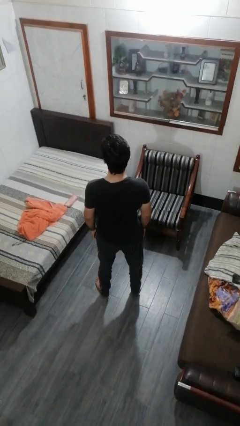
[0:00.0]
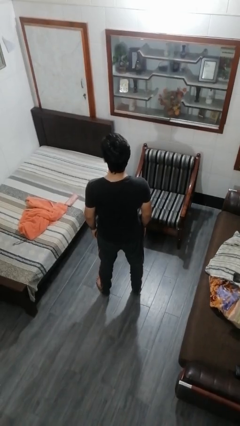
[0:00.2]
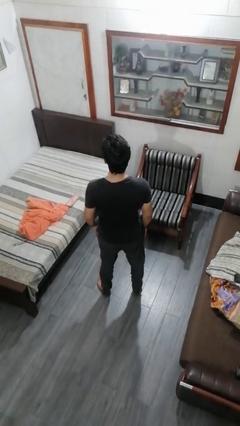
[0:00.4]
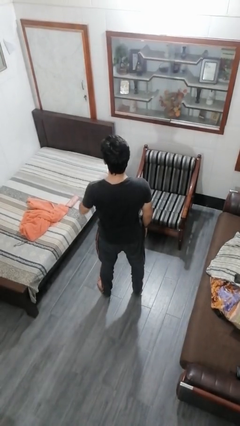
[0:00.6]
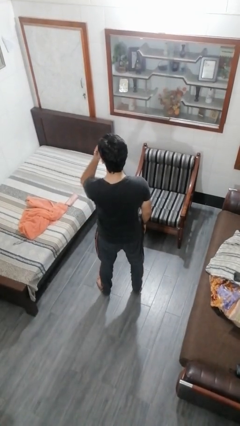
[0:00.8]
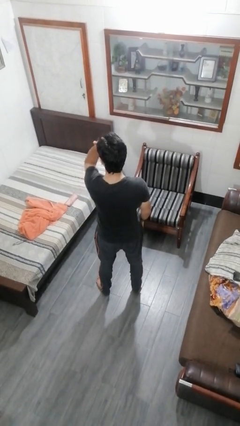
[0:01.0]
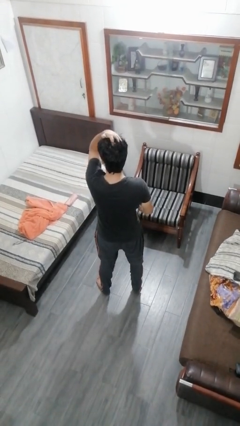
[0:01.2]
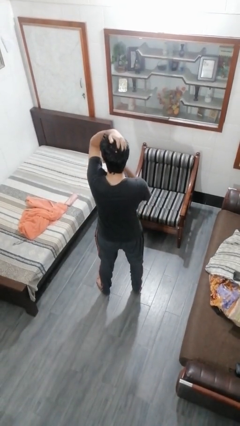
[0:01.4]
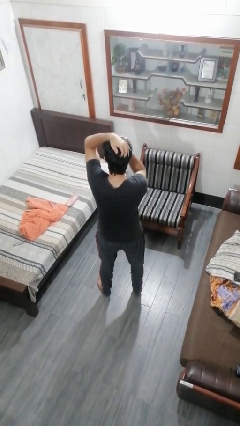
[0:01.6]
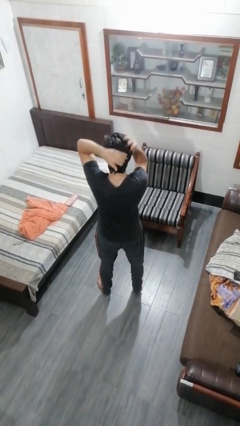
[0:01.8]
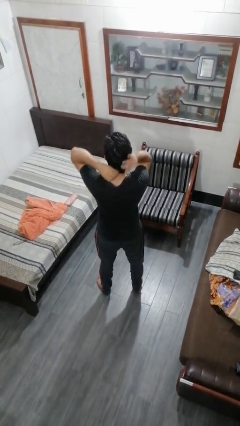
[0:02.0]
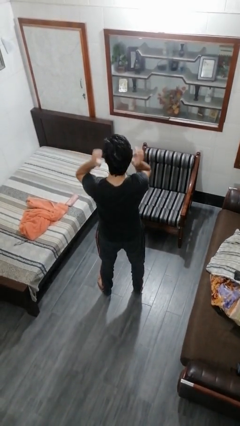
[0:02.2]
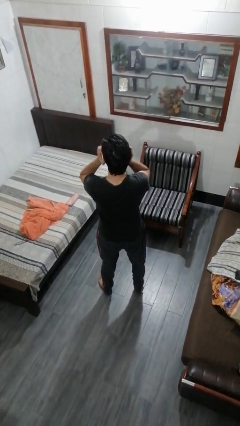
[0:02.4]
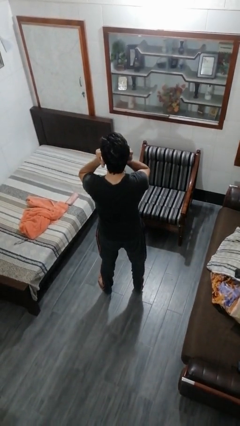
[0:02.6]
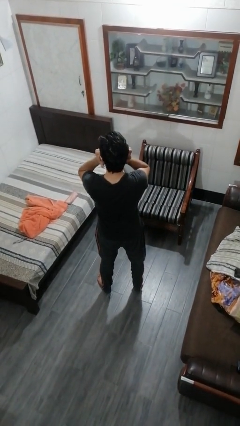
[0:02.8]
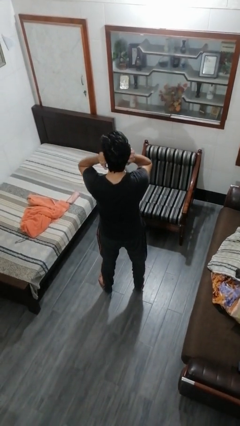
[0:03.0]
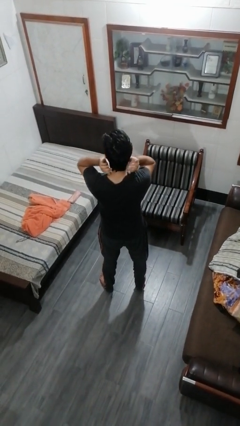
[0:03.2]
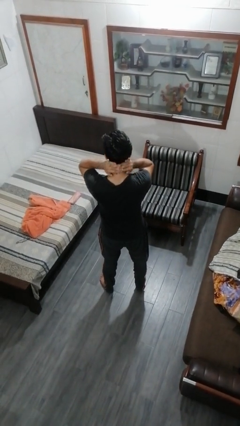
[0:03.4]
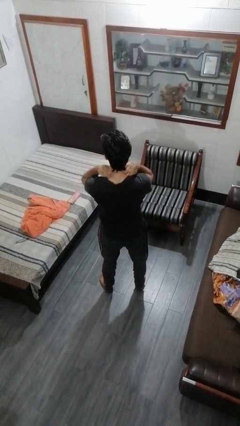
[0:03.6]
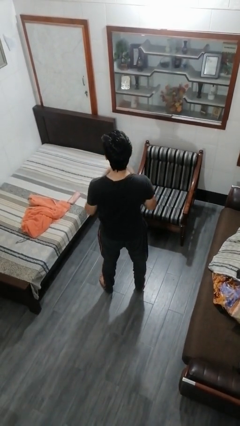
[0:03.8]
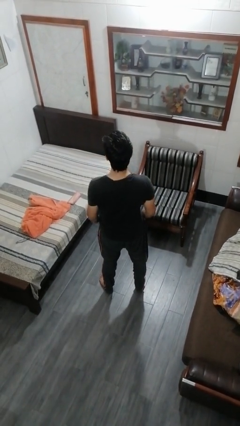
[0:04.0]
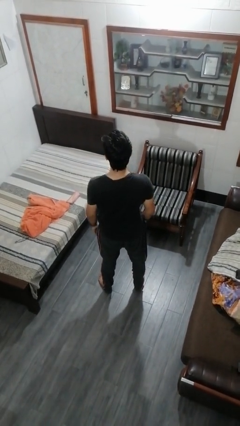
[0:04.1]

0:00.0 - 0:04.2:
person strokes hair

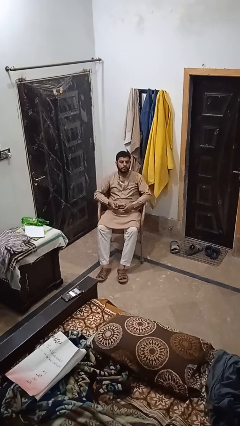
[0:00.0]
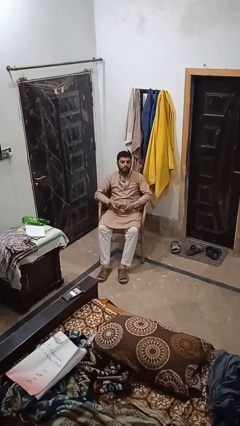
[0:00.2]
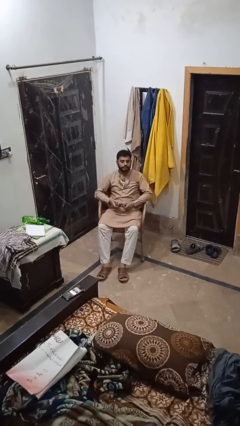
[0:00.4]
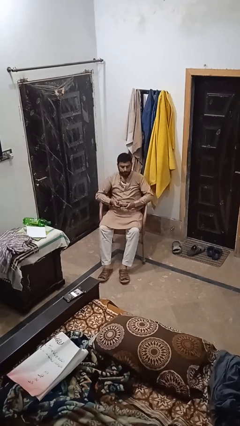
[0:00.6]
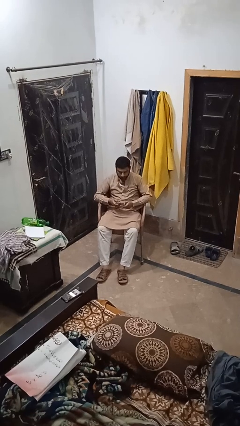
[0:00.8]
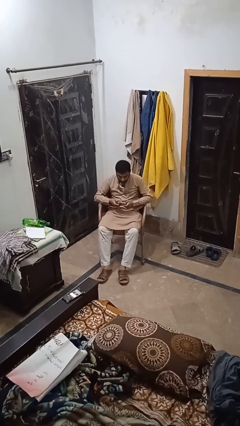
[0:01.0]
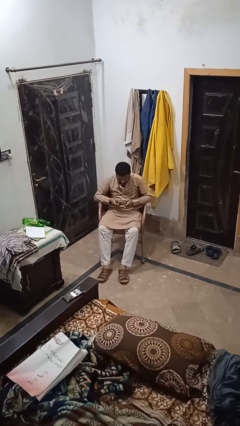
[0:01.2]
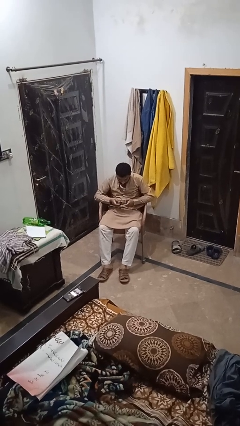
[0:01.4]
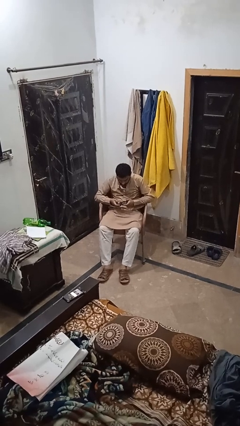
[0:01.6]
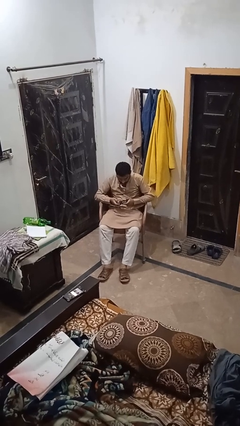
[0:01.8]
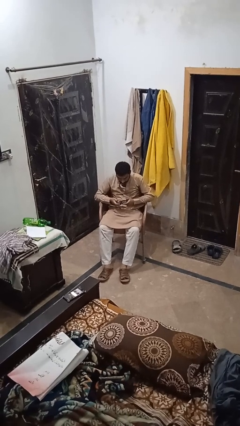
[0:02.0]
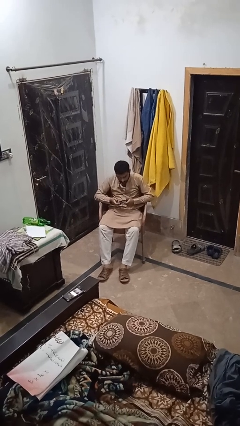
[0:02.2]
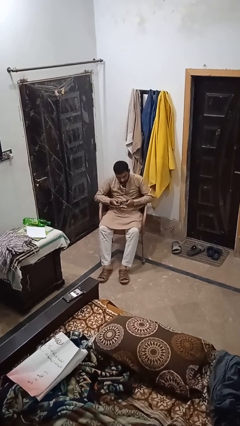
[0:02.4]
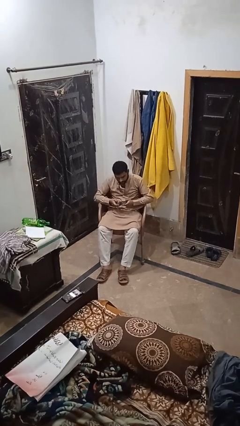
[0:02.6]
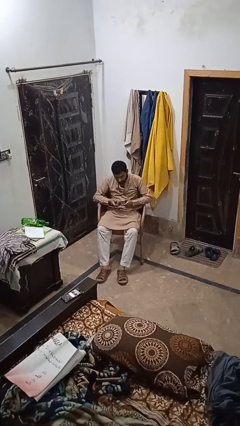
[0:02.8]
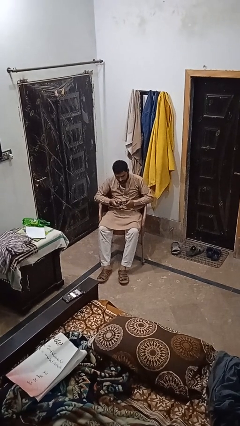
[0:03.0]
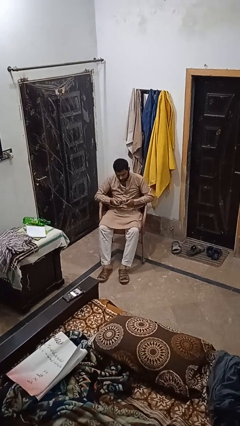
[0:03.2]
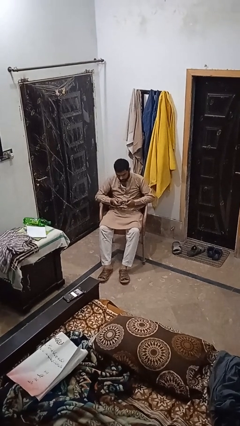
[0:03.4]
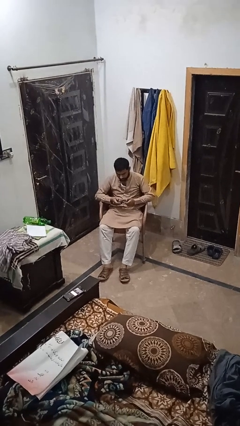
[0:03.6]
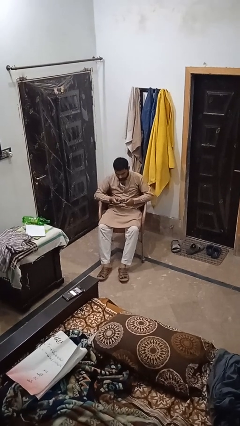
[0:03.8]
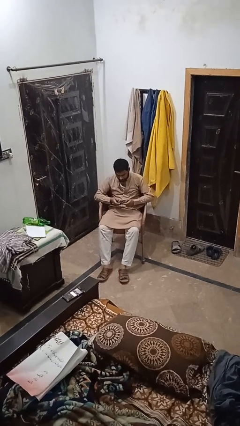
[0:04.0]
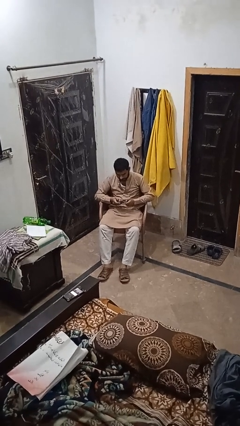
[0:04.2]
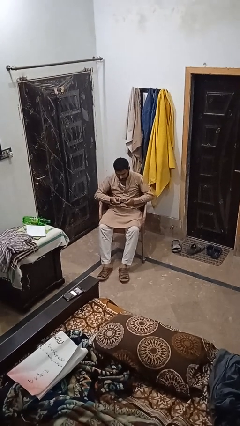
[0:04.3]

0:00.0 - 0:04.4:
person interacts with handheld game

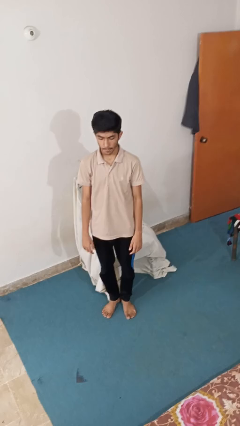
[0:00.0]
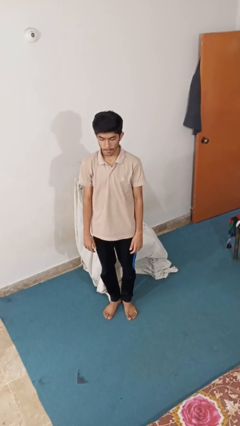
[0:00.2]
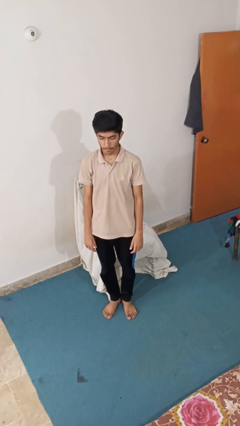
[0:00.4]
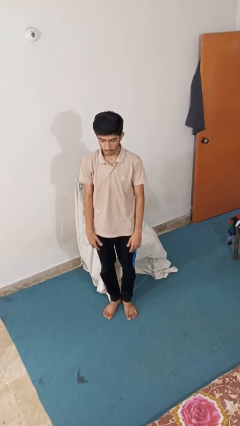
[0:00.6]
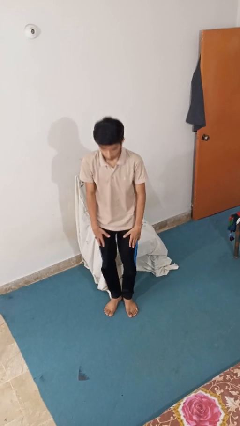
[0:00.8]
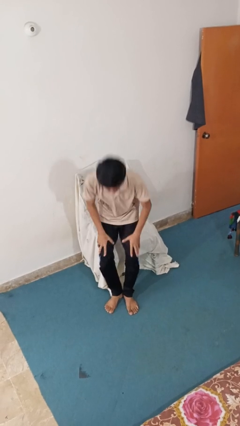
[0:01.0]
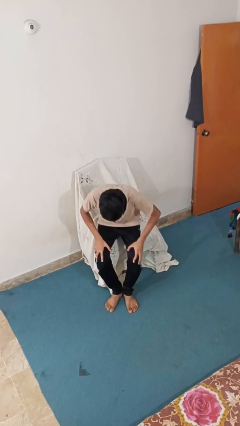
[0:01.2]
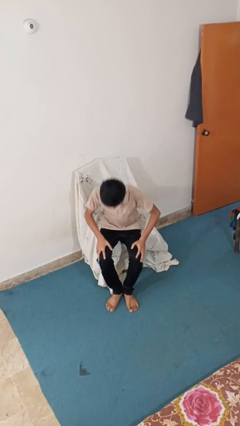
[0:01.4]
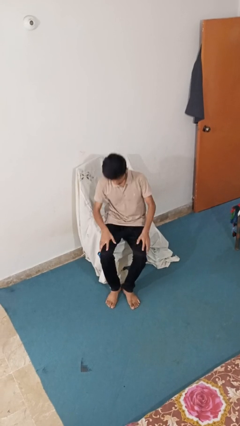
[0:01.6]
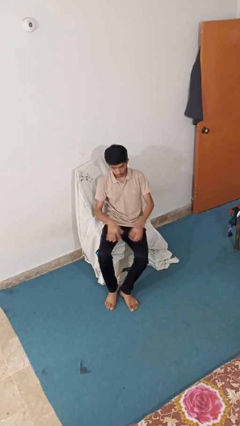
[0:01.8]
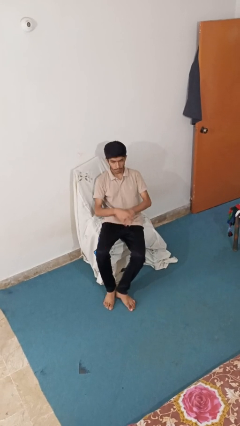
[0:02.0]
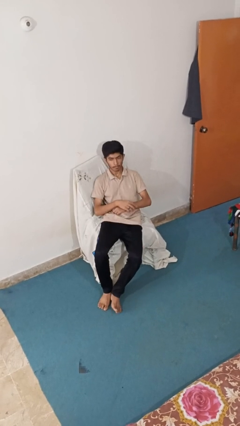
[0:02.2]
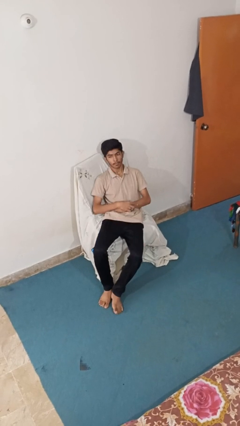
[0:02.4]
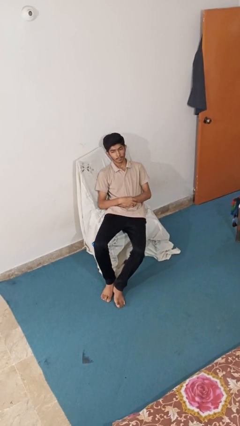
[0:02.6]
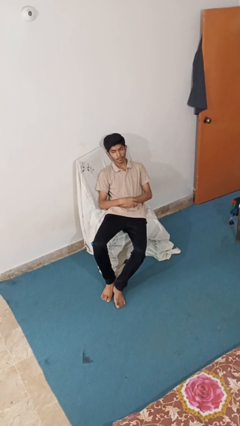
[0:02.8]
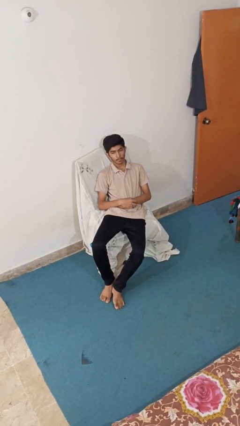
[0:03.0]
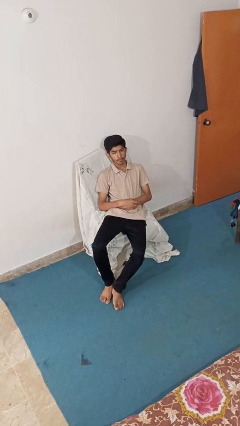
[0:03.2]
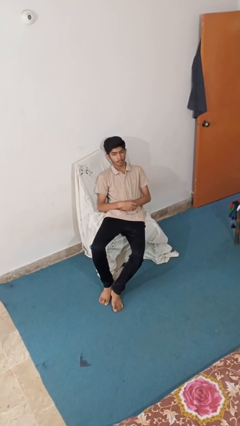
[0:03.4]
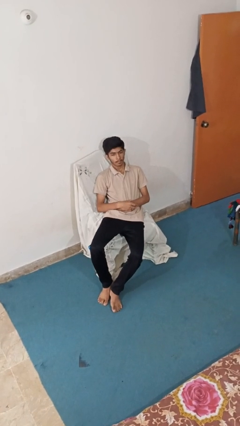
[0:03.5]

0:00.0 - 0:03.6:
person lies down on couch

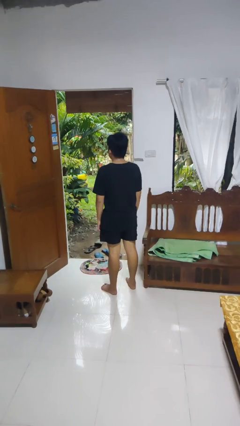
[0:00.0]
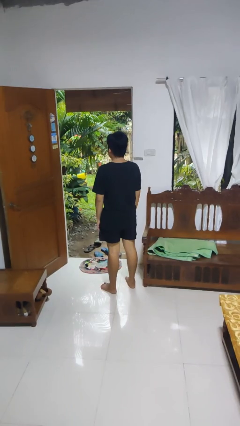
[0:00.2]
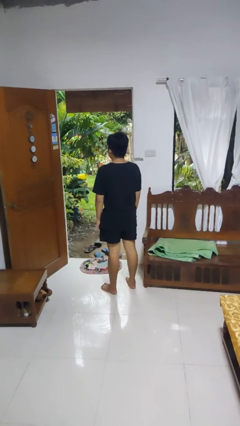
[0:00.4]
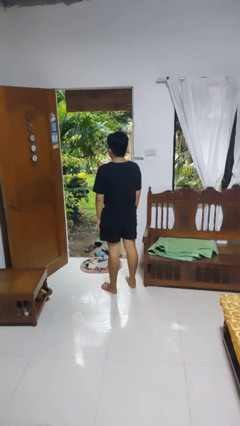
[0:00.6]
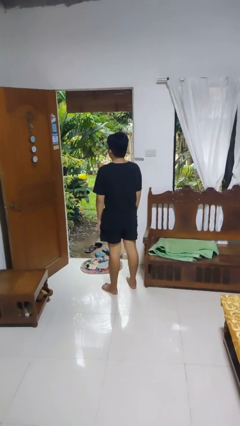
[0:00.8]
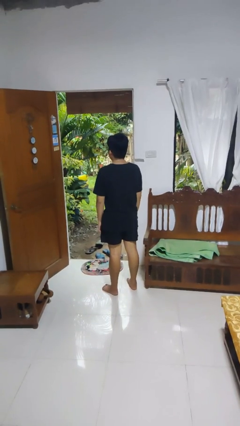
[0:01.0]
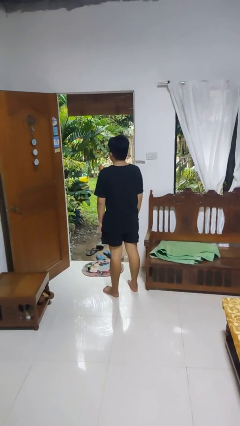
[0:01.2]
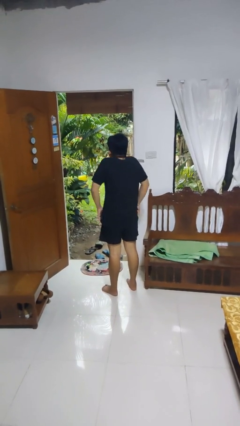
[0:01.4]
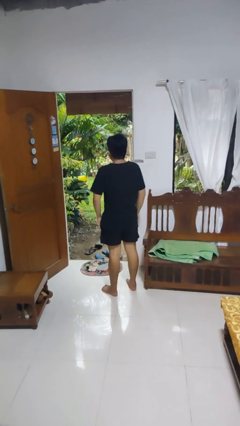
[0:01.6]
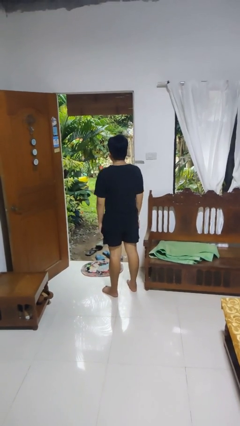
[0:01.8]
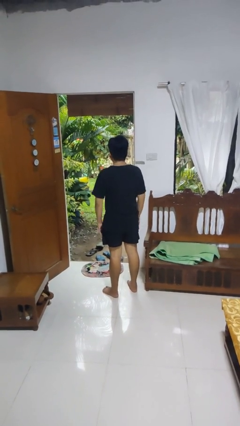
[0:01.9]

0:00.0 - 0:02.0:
person shrugs

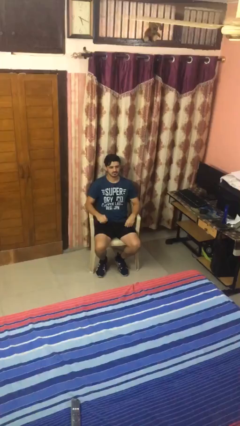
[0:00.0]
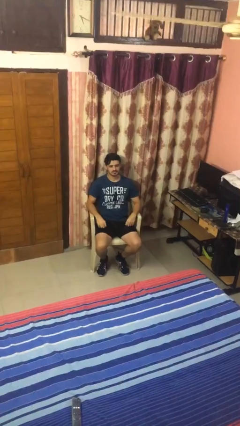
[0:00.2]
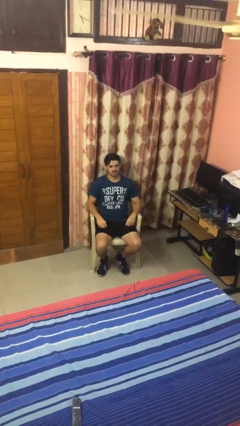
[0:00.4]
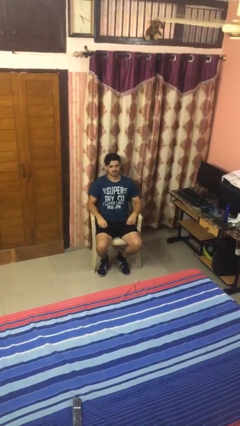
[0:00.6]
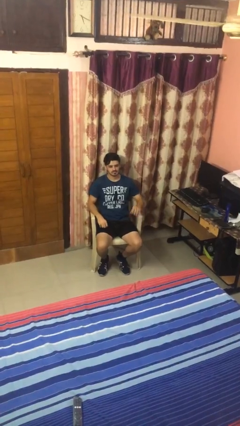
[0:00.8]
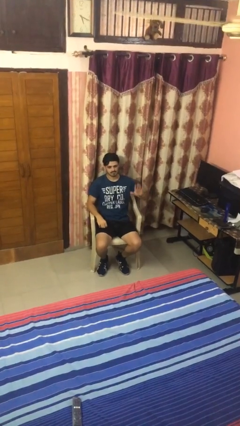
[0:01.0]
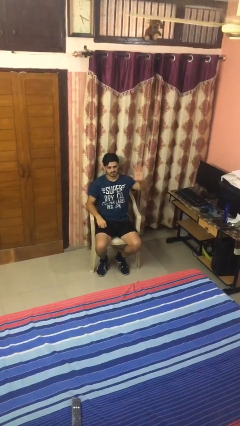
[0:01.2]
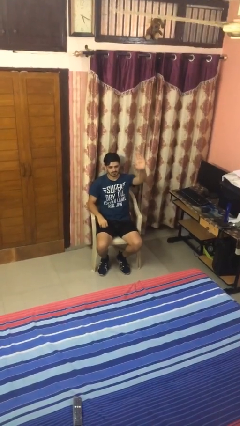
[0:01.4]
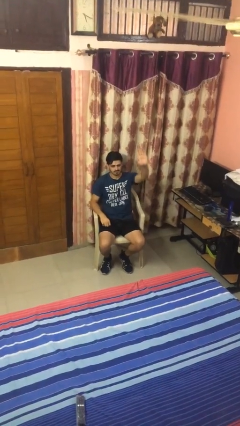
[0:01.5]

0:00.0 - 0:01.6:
person gestures raise hand

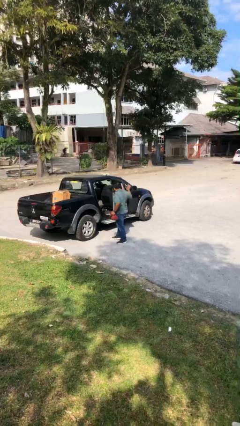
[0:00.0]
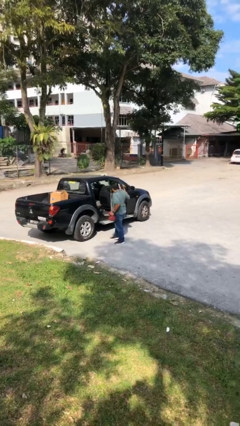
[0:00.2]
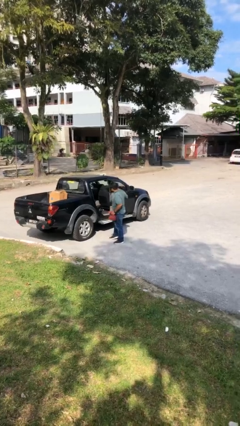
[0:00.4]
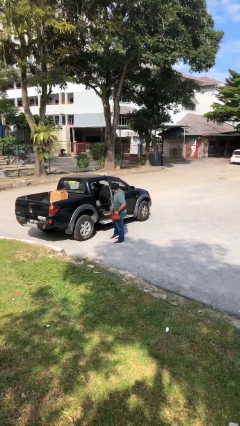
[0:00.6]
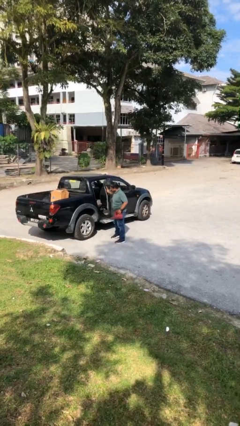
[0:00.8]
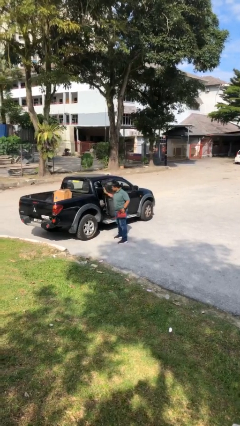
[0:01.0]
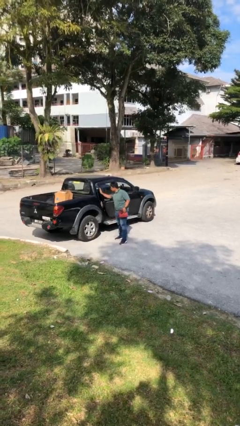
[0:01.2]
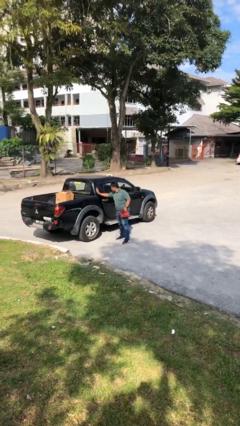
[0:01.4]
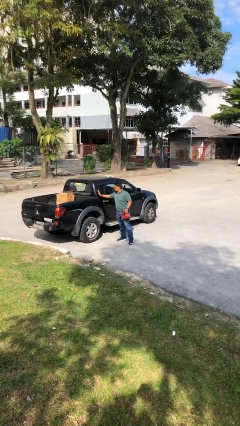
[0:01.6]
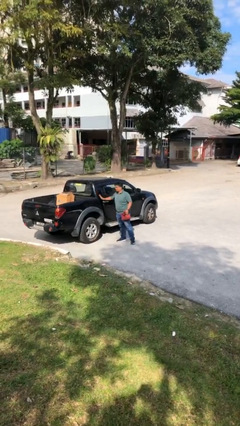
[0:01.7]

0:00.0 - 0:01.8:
person closes car door
